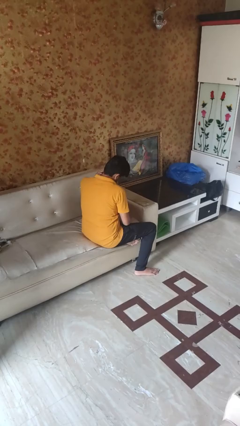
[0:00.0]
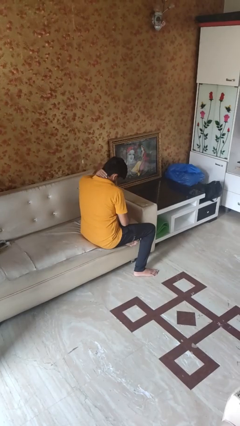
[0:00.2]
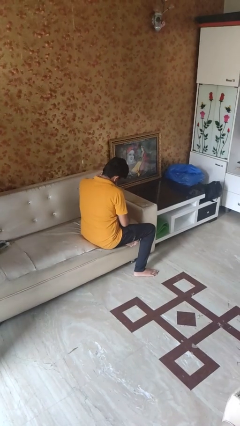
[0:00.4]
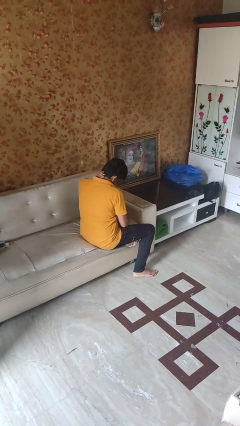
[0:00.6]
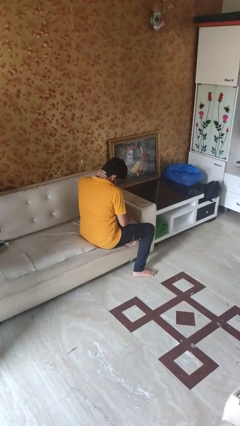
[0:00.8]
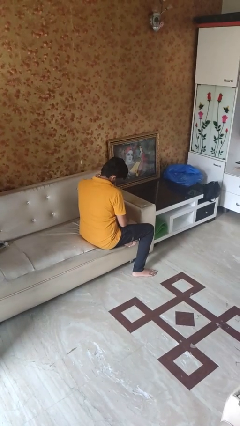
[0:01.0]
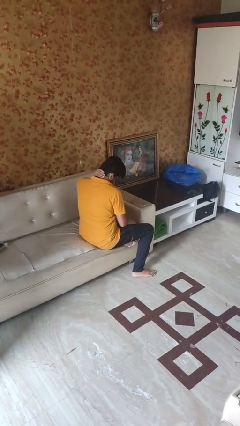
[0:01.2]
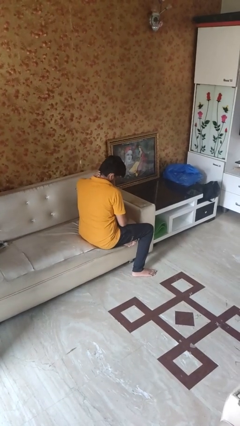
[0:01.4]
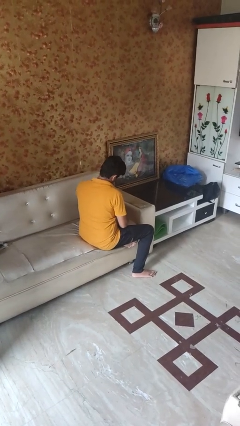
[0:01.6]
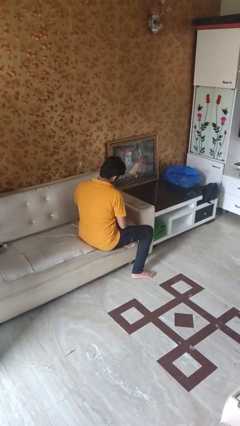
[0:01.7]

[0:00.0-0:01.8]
person rubs neck

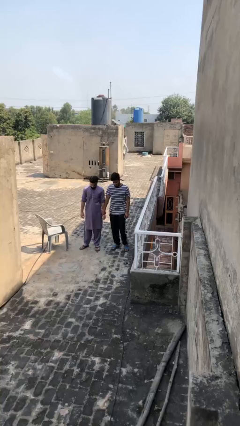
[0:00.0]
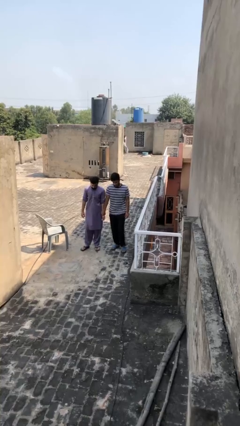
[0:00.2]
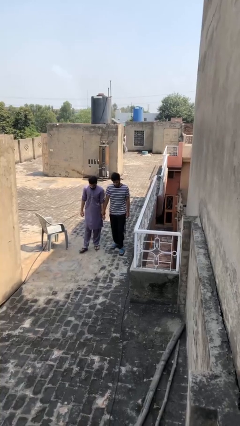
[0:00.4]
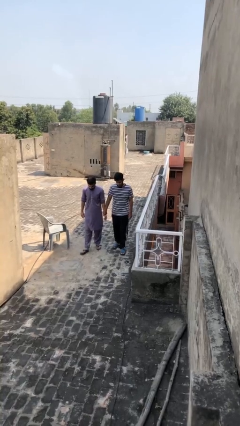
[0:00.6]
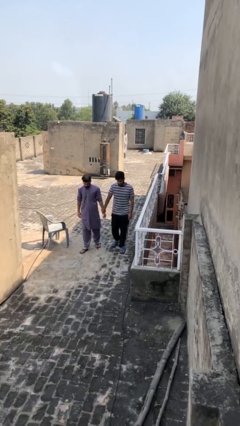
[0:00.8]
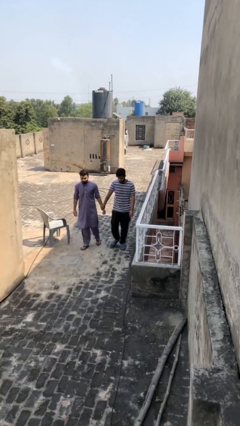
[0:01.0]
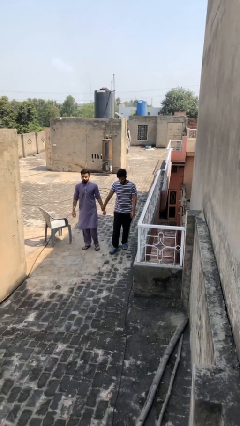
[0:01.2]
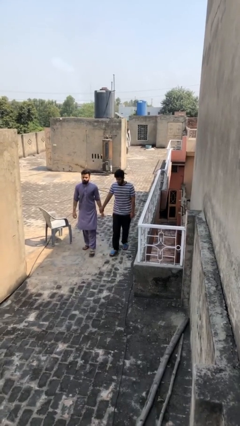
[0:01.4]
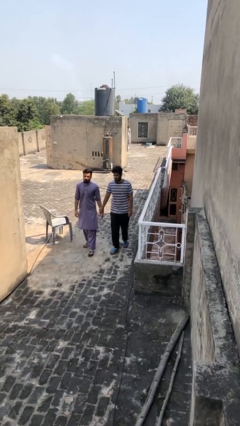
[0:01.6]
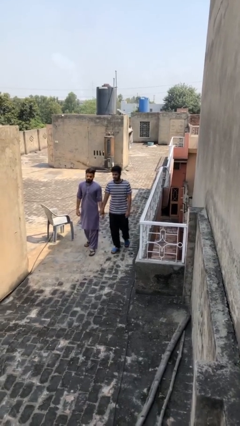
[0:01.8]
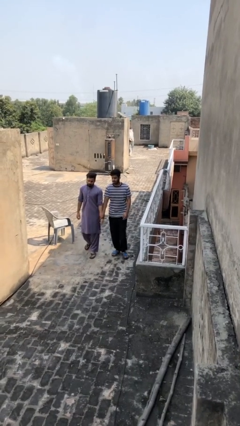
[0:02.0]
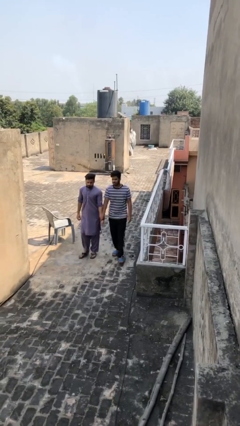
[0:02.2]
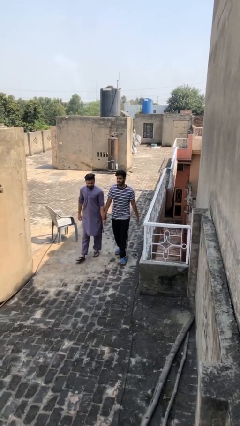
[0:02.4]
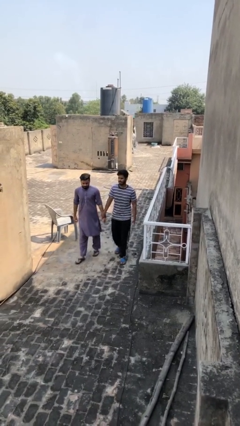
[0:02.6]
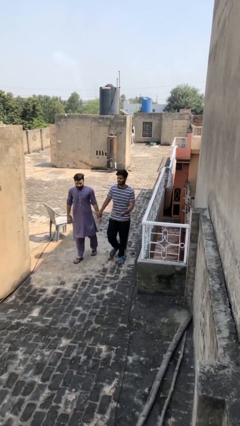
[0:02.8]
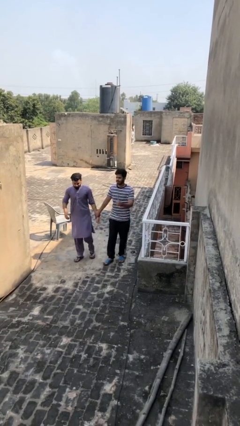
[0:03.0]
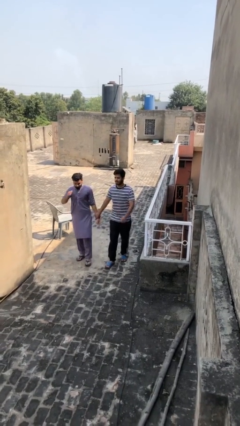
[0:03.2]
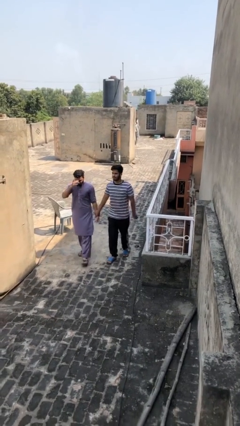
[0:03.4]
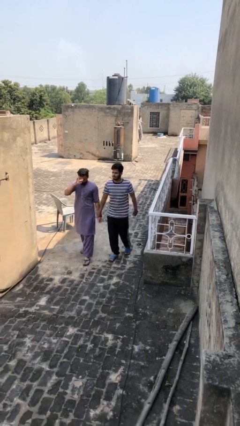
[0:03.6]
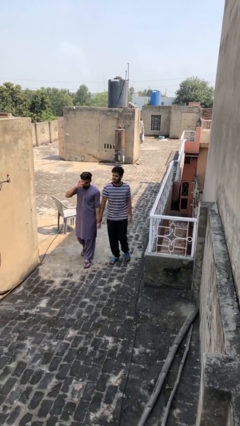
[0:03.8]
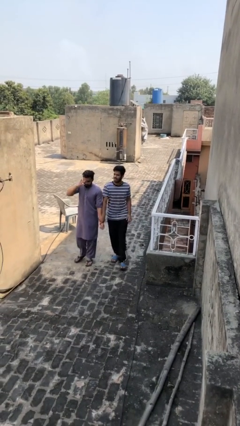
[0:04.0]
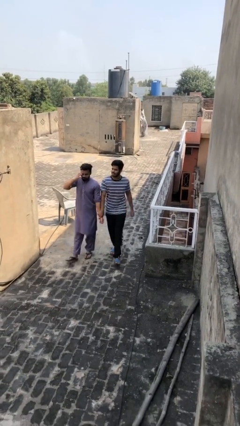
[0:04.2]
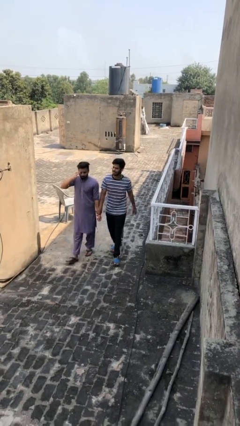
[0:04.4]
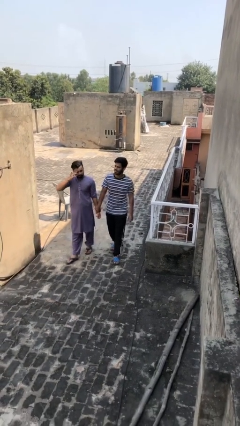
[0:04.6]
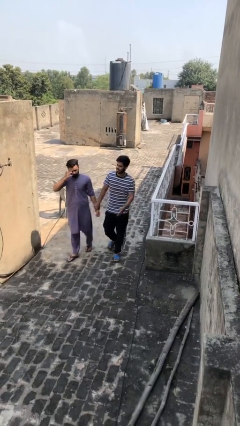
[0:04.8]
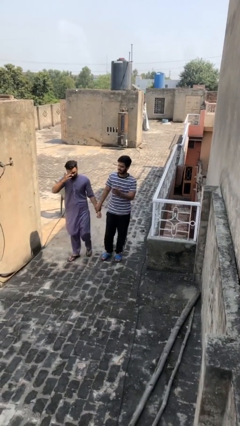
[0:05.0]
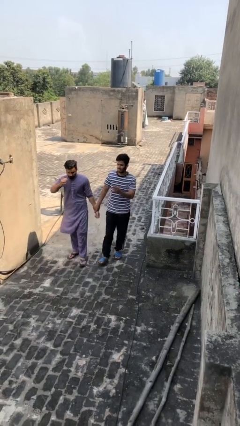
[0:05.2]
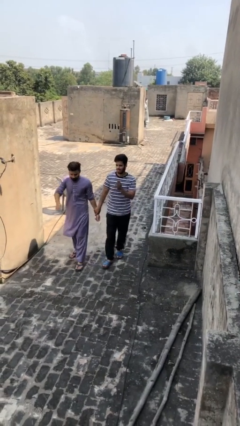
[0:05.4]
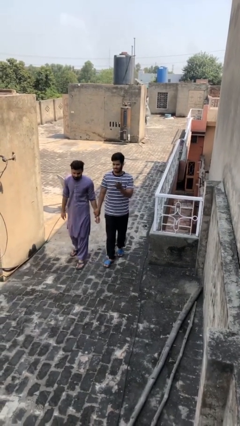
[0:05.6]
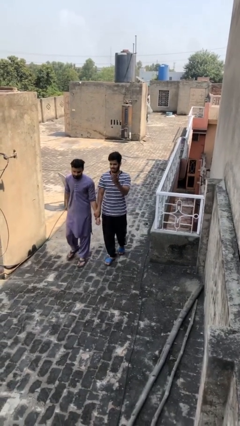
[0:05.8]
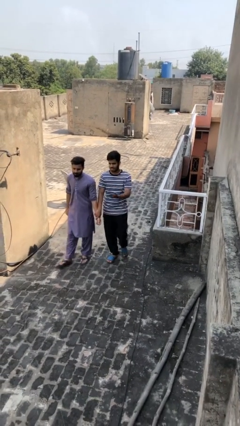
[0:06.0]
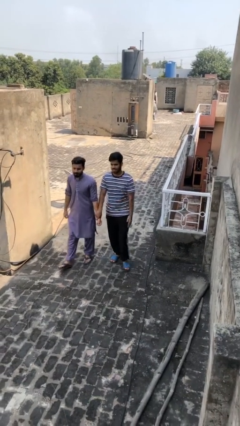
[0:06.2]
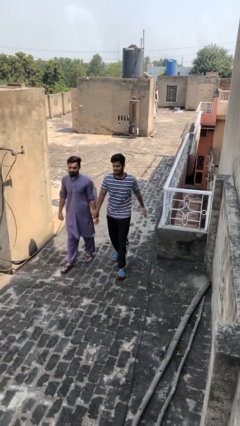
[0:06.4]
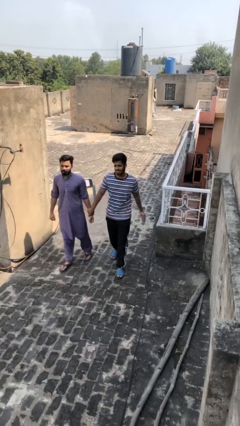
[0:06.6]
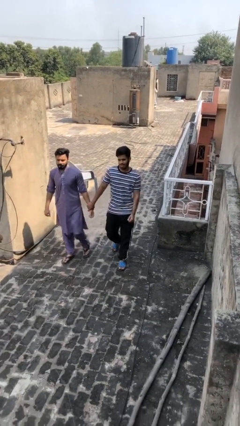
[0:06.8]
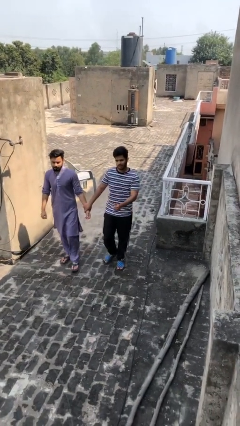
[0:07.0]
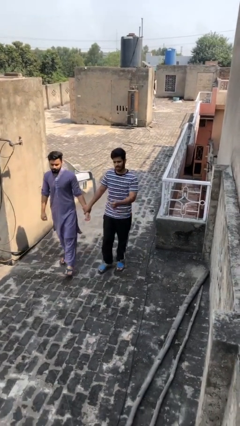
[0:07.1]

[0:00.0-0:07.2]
person holds hand

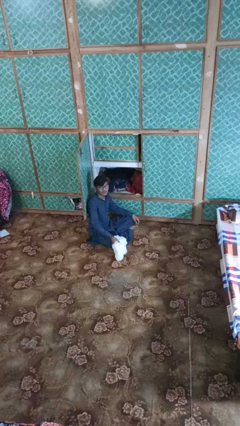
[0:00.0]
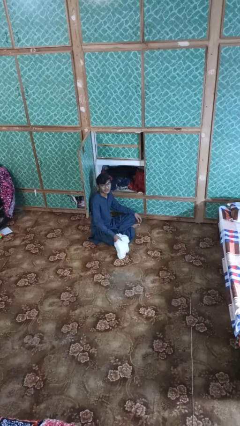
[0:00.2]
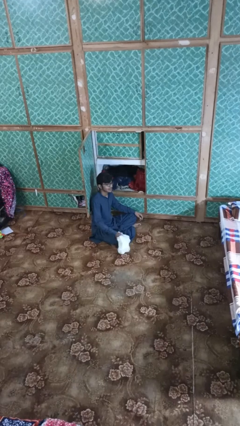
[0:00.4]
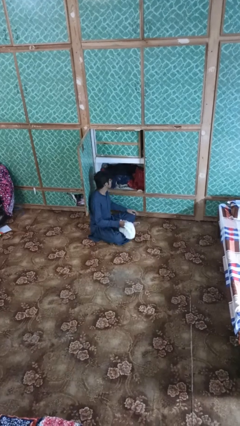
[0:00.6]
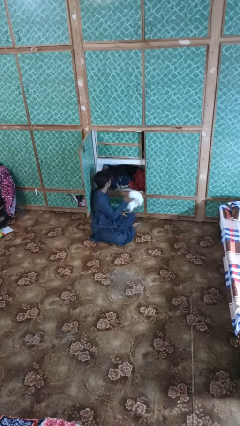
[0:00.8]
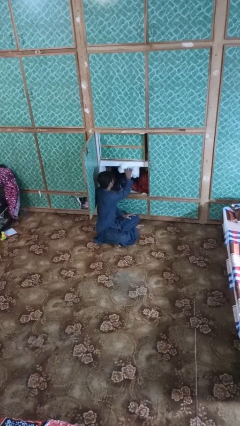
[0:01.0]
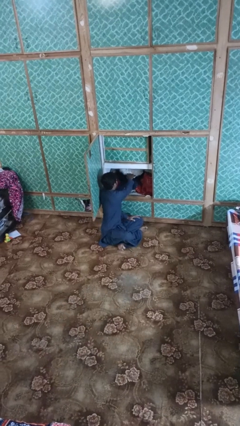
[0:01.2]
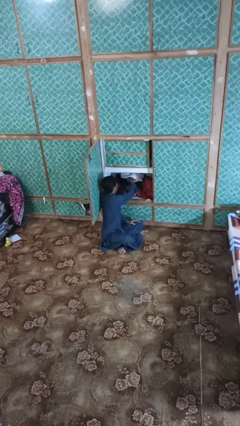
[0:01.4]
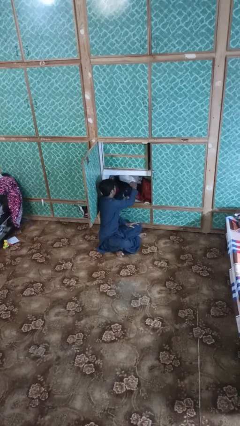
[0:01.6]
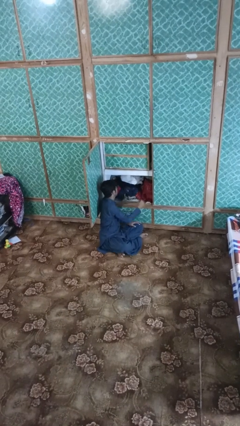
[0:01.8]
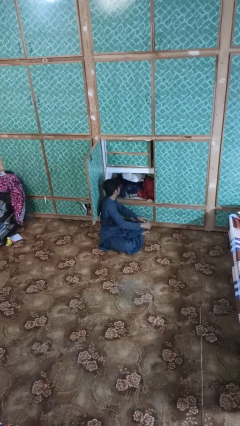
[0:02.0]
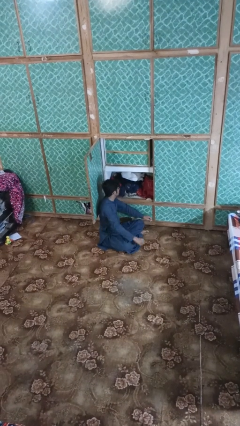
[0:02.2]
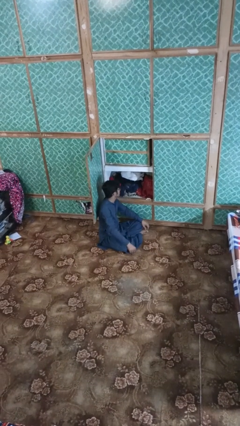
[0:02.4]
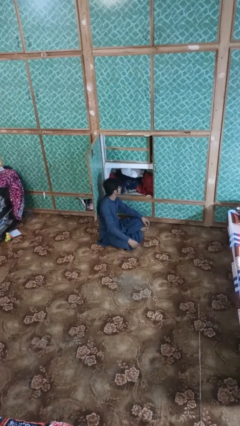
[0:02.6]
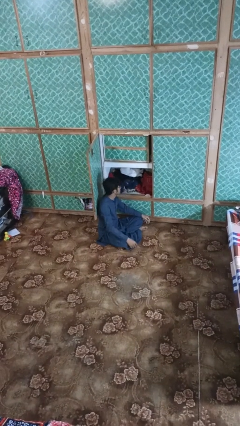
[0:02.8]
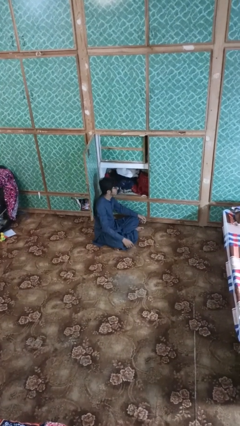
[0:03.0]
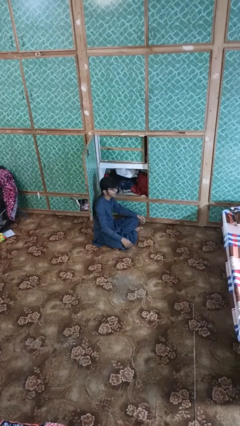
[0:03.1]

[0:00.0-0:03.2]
person puts clothes into dresser

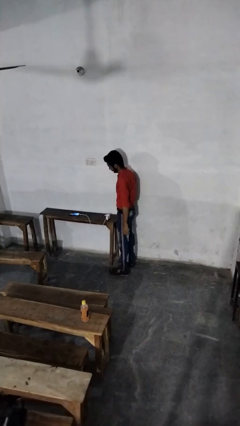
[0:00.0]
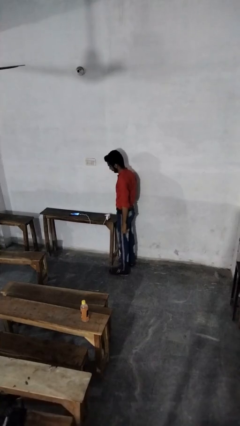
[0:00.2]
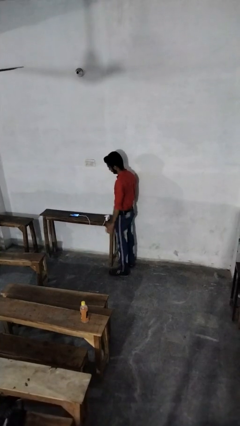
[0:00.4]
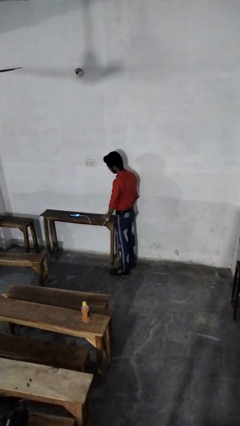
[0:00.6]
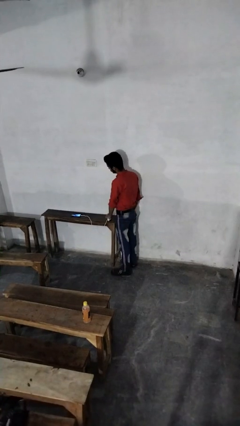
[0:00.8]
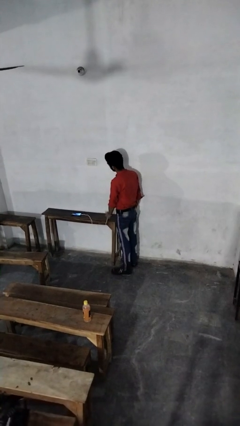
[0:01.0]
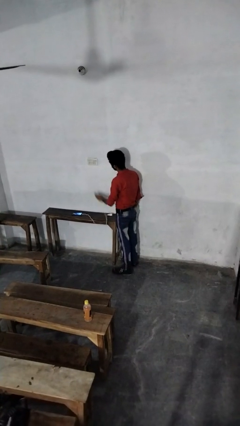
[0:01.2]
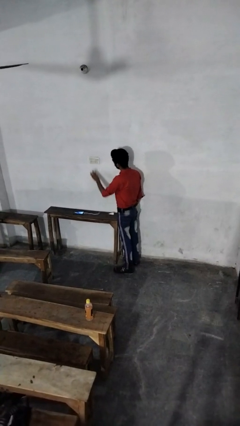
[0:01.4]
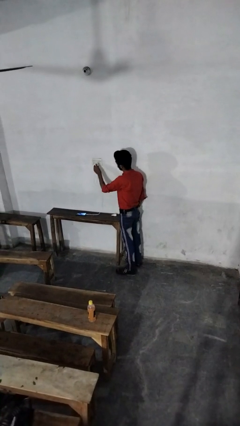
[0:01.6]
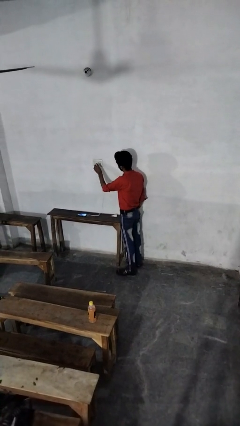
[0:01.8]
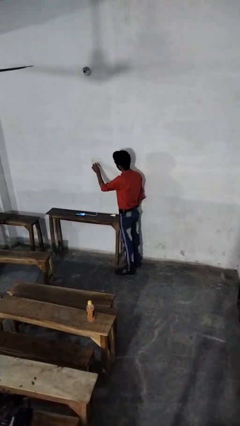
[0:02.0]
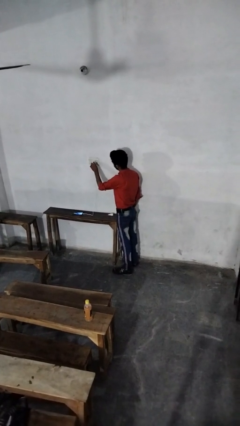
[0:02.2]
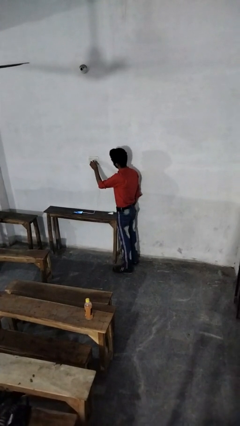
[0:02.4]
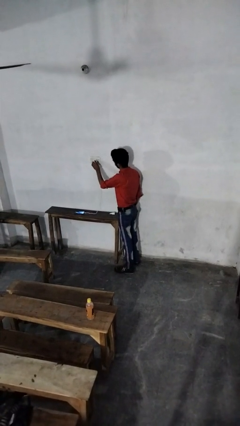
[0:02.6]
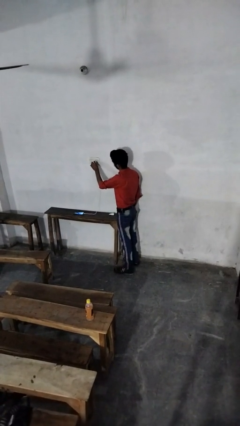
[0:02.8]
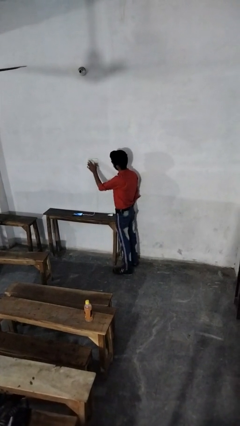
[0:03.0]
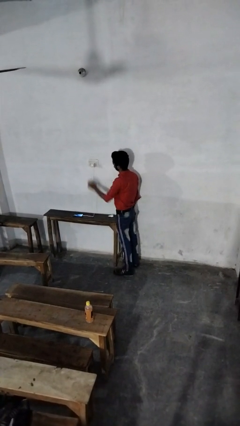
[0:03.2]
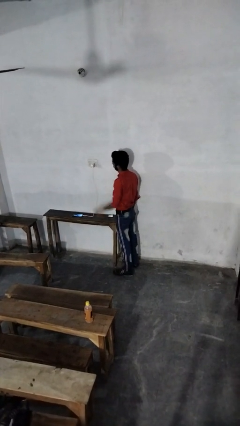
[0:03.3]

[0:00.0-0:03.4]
person plugs into electrical socket

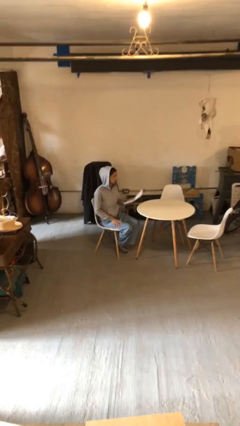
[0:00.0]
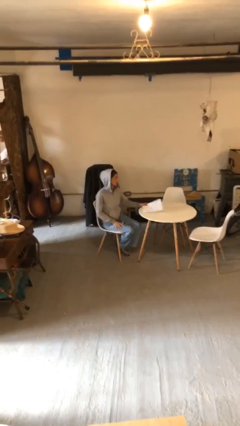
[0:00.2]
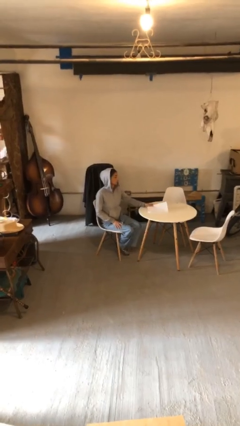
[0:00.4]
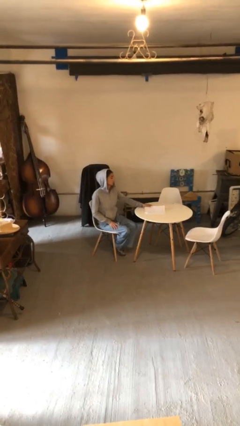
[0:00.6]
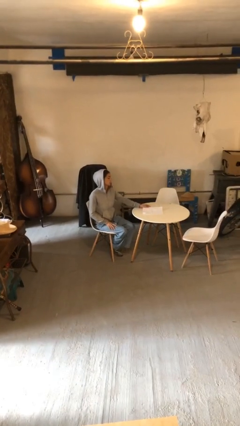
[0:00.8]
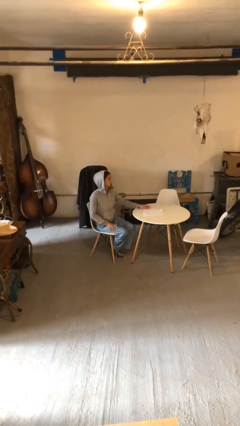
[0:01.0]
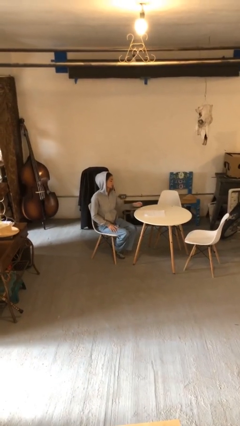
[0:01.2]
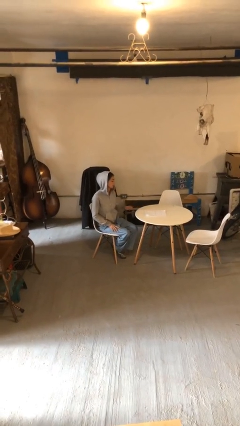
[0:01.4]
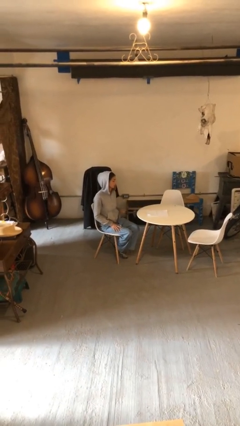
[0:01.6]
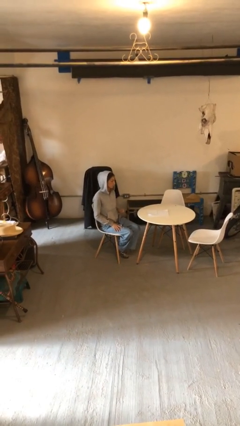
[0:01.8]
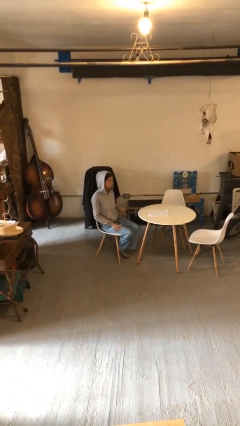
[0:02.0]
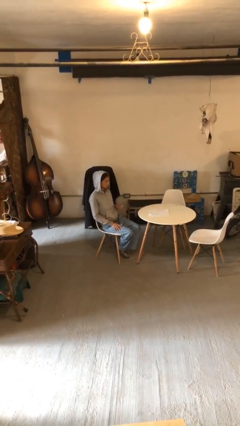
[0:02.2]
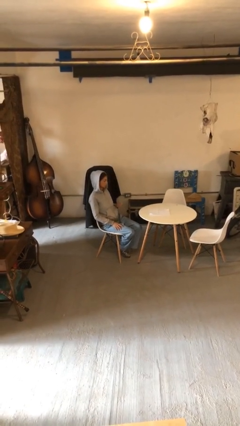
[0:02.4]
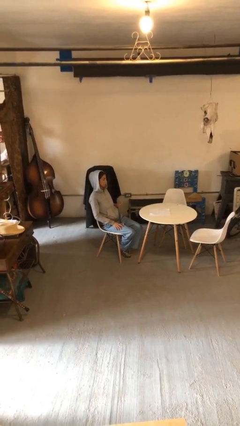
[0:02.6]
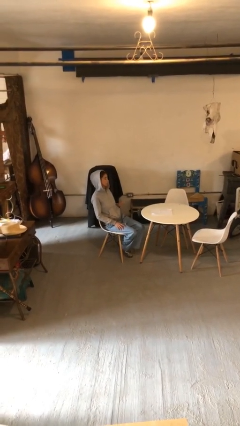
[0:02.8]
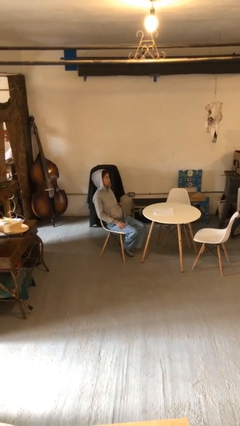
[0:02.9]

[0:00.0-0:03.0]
person puts down object on table
